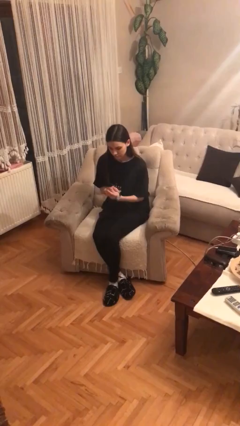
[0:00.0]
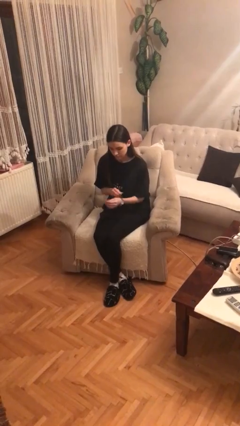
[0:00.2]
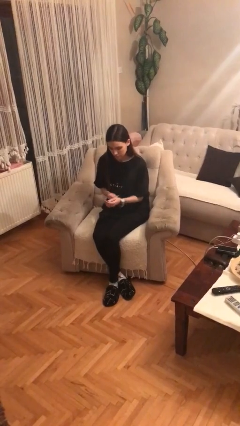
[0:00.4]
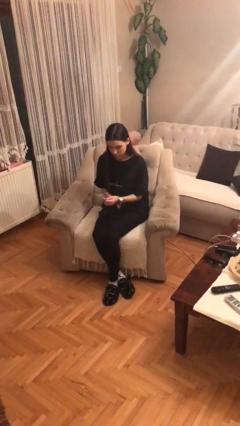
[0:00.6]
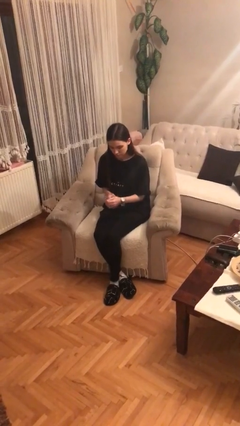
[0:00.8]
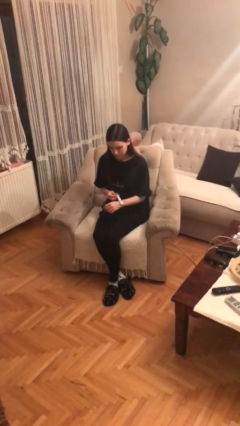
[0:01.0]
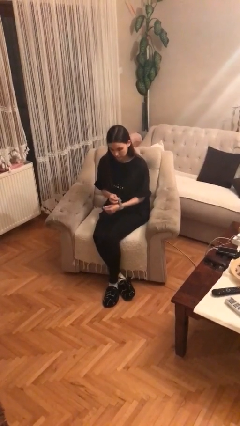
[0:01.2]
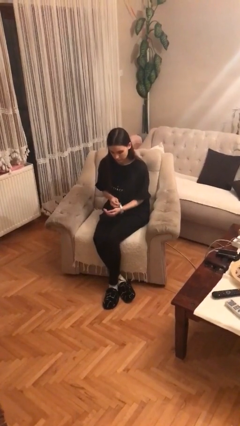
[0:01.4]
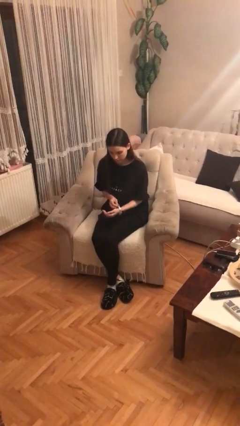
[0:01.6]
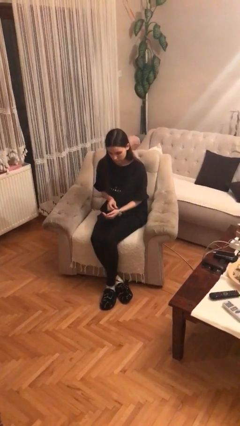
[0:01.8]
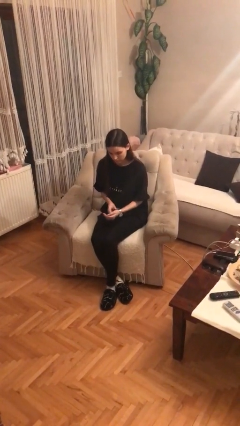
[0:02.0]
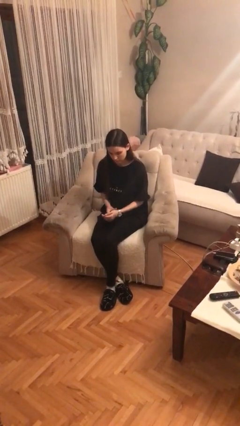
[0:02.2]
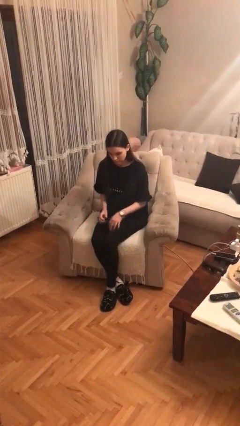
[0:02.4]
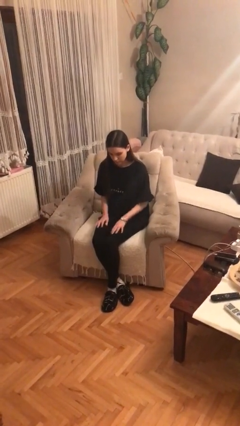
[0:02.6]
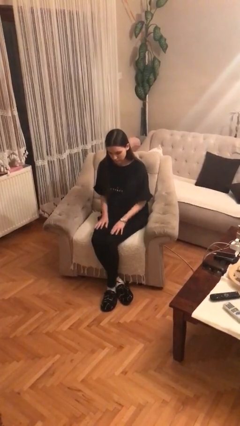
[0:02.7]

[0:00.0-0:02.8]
person puts on wristwatch

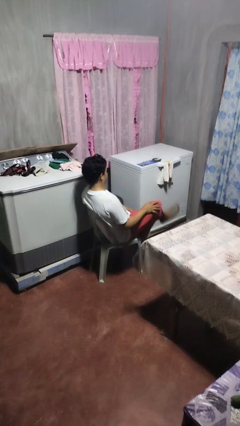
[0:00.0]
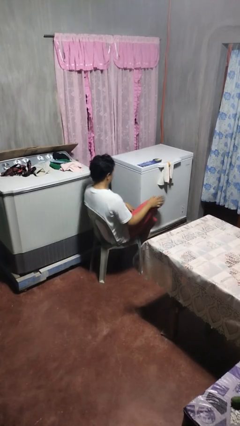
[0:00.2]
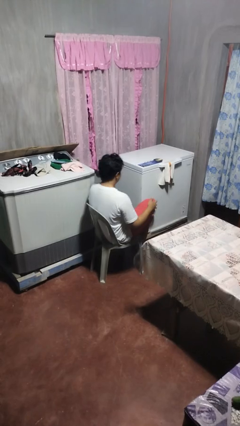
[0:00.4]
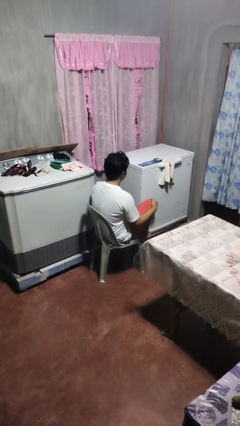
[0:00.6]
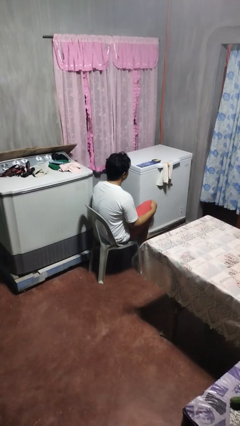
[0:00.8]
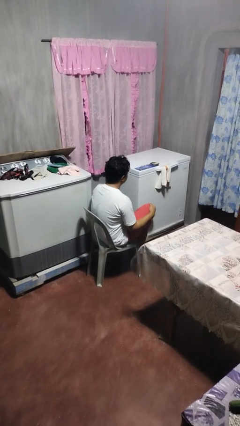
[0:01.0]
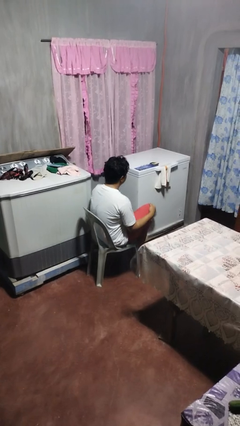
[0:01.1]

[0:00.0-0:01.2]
person crosses legs

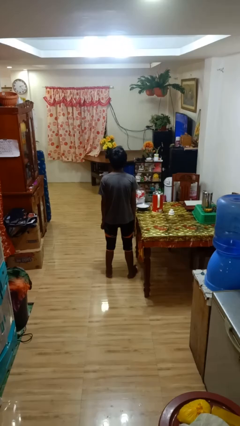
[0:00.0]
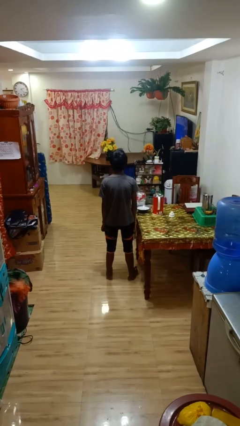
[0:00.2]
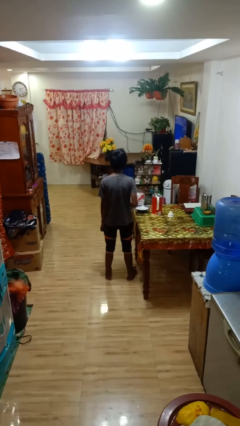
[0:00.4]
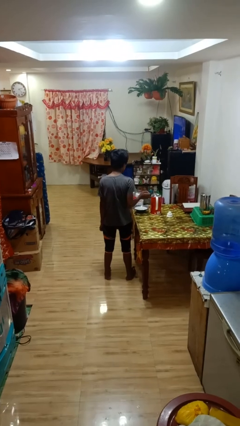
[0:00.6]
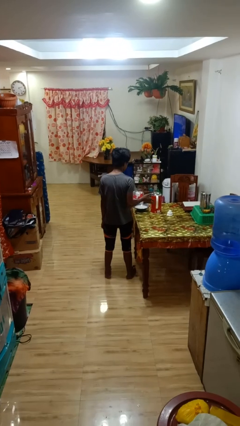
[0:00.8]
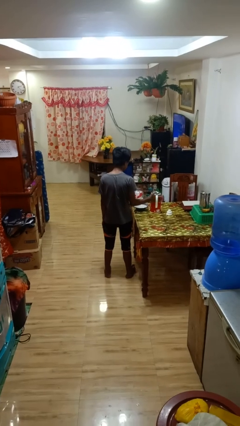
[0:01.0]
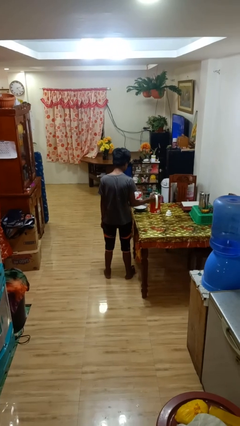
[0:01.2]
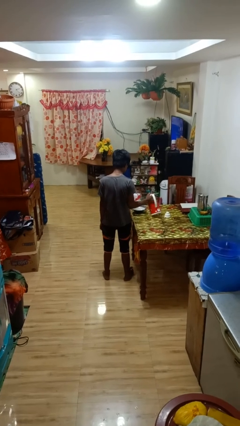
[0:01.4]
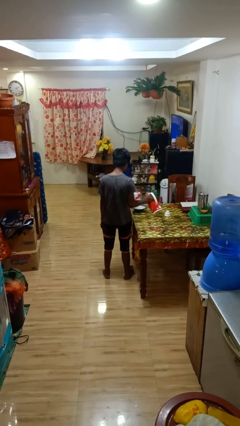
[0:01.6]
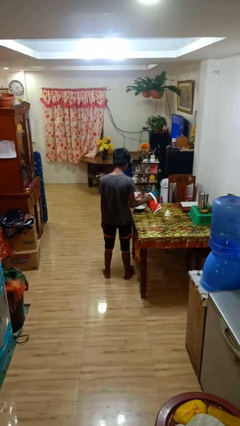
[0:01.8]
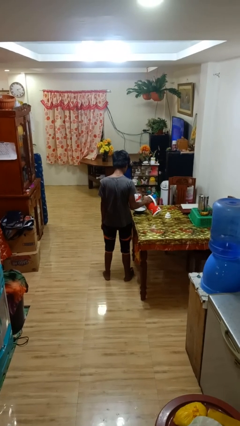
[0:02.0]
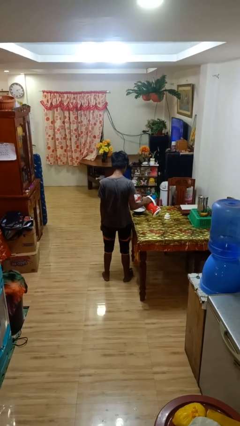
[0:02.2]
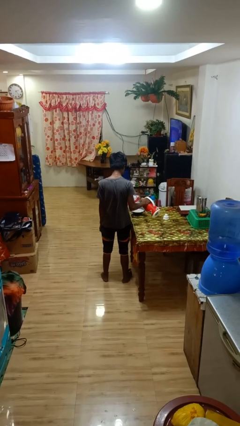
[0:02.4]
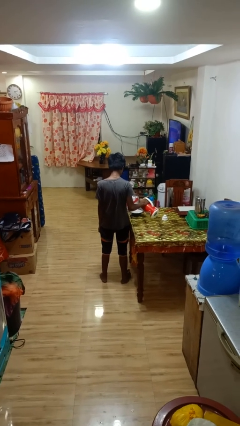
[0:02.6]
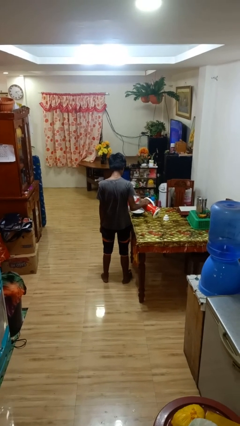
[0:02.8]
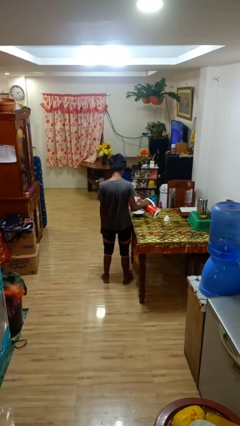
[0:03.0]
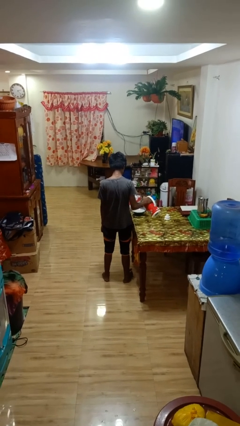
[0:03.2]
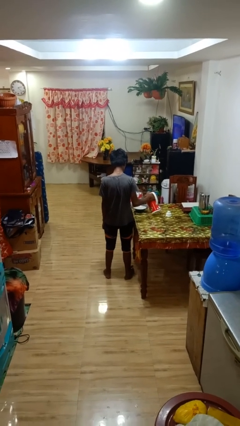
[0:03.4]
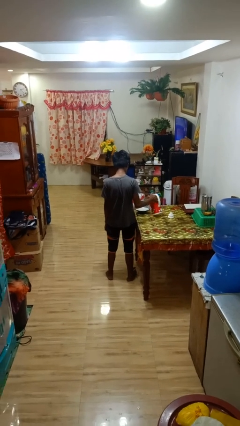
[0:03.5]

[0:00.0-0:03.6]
person pours into bowl

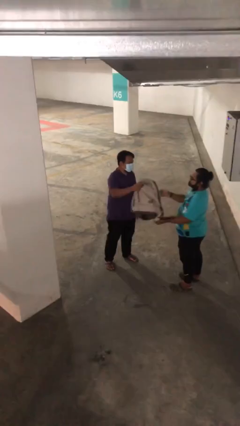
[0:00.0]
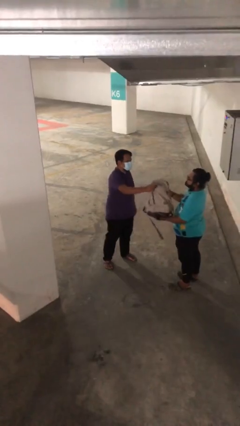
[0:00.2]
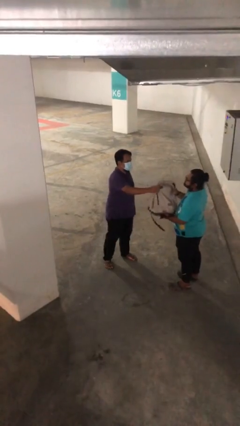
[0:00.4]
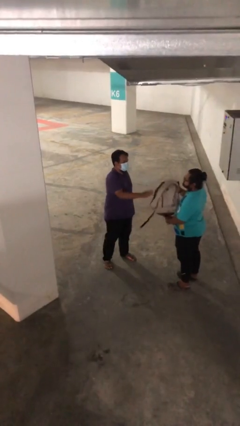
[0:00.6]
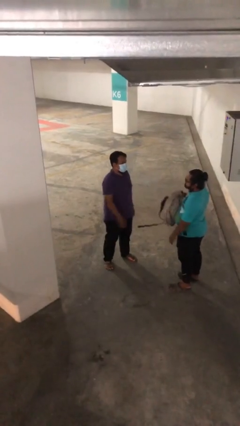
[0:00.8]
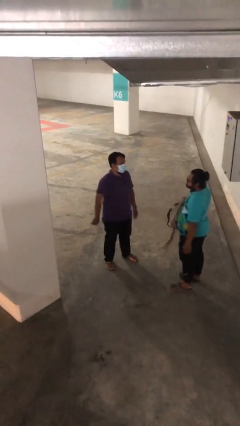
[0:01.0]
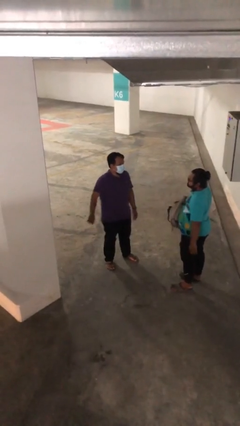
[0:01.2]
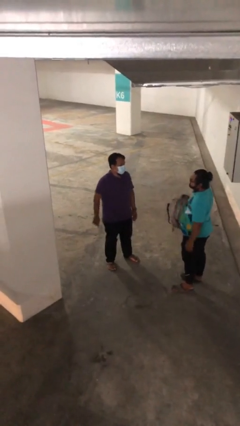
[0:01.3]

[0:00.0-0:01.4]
person transfers object to person

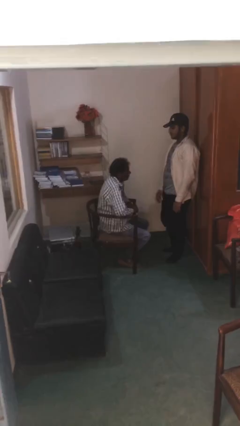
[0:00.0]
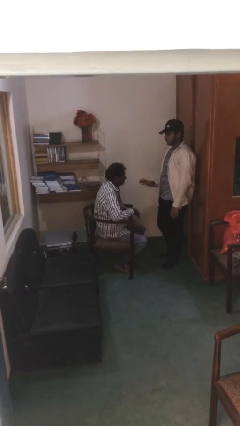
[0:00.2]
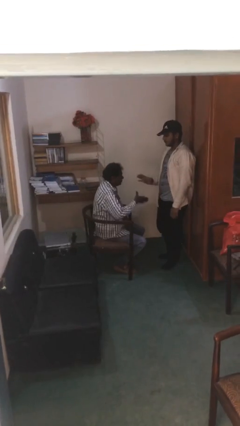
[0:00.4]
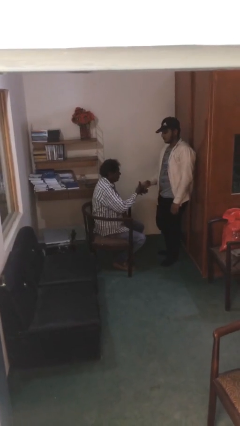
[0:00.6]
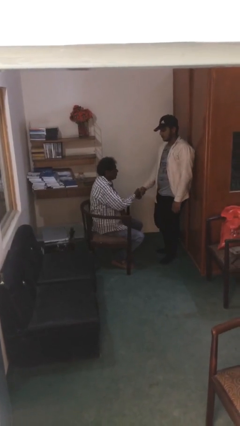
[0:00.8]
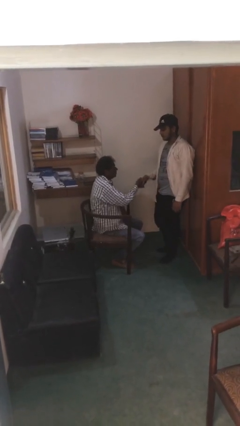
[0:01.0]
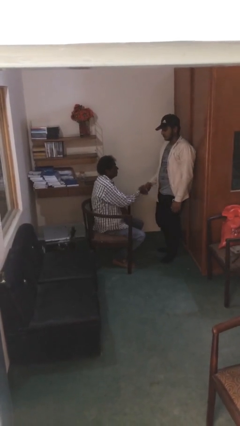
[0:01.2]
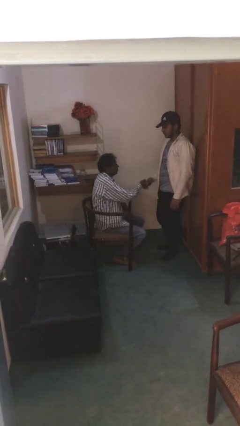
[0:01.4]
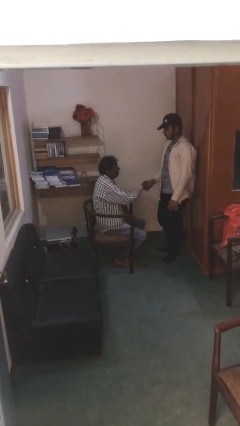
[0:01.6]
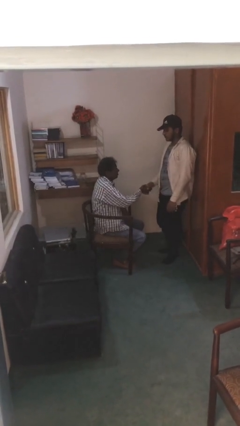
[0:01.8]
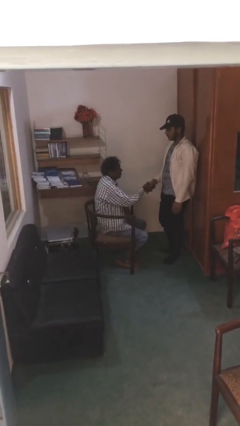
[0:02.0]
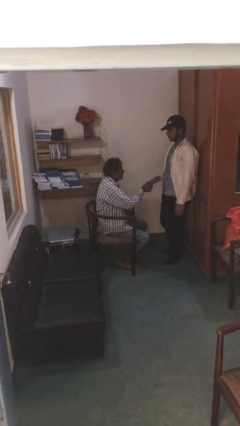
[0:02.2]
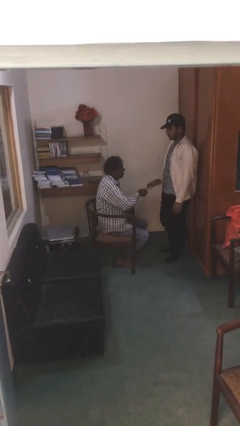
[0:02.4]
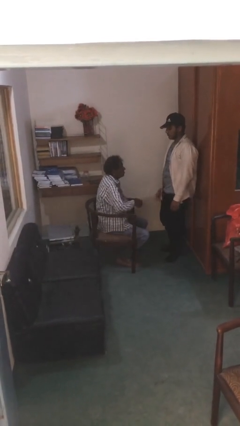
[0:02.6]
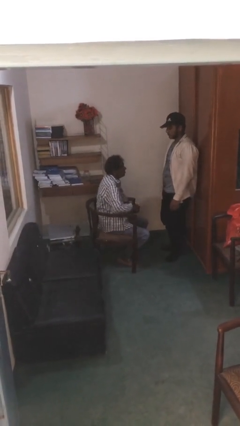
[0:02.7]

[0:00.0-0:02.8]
person shakes hand

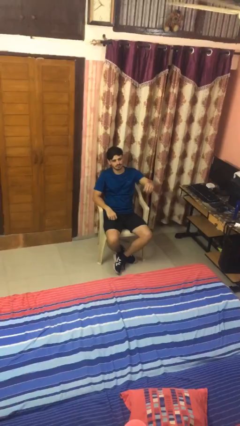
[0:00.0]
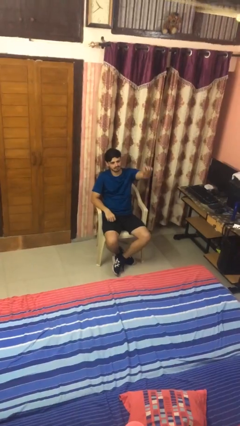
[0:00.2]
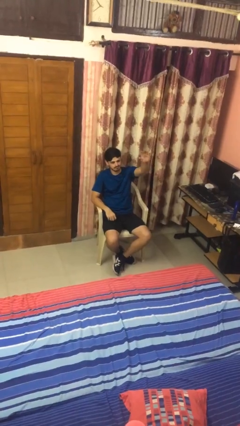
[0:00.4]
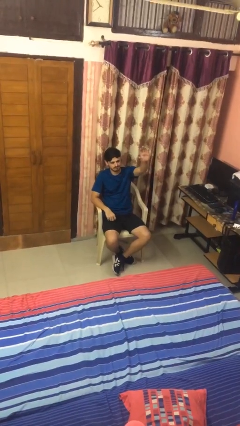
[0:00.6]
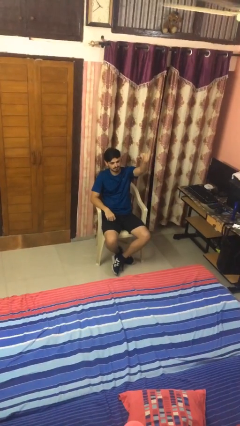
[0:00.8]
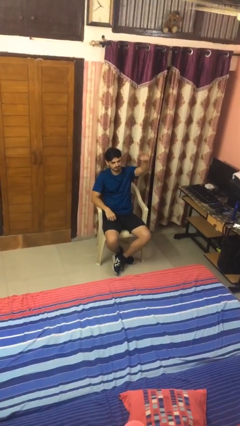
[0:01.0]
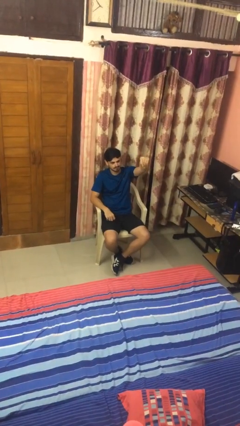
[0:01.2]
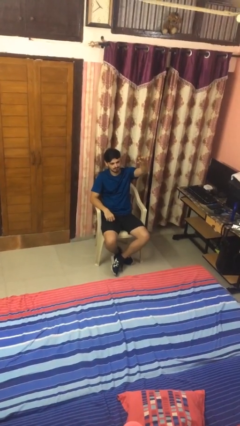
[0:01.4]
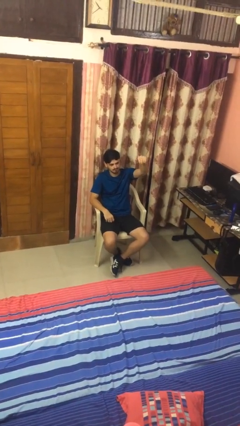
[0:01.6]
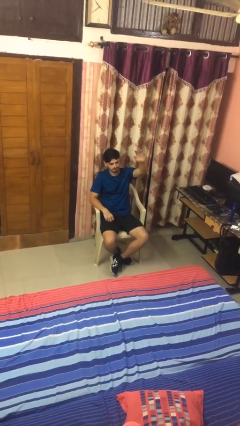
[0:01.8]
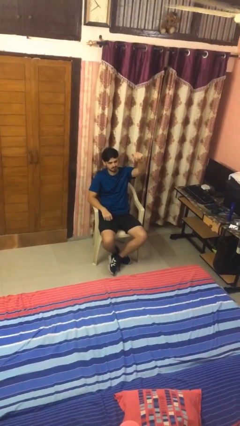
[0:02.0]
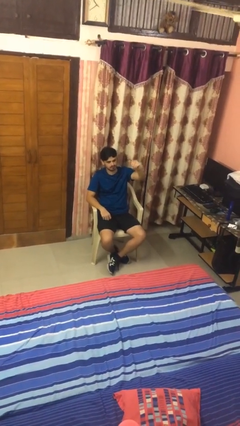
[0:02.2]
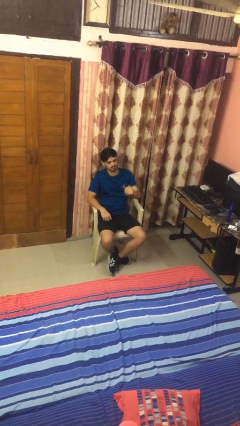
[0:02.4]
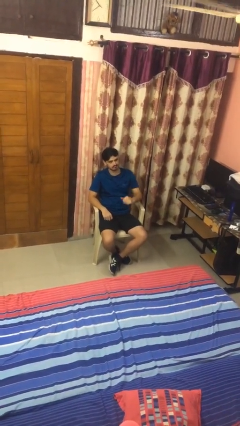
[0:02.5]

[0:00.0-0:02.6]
person gestures come here

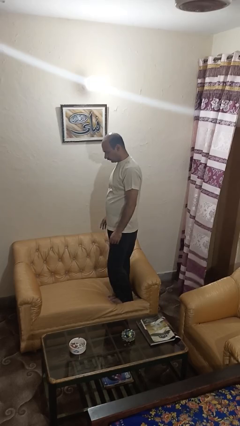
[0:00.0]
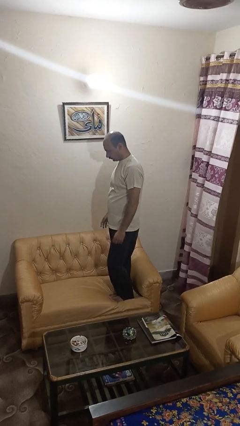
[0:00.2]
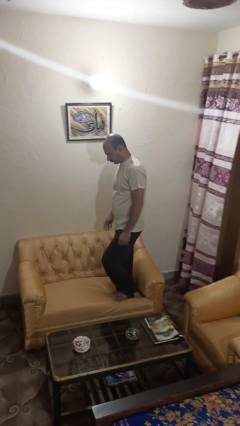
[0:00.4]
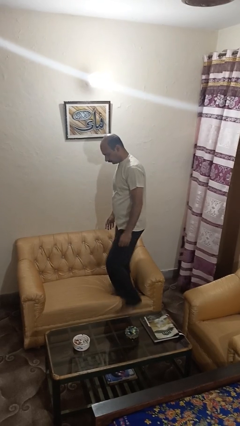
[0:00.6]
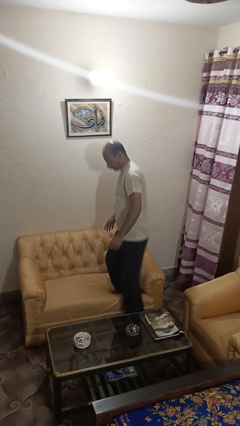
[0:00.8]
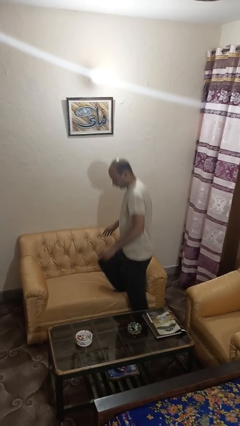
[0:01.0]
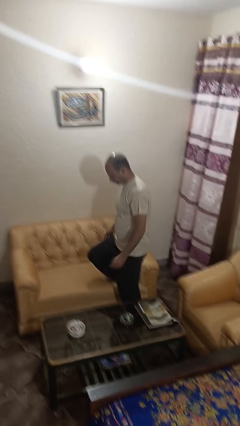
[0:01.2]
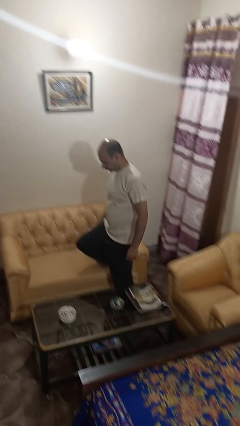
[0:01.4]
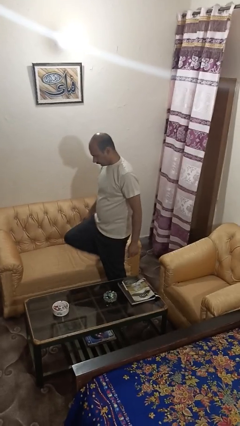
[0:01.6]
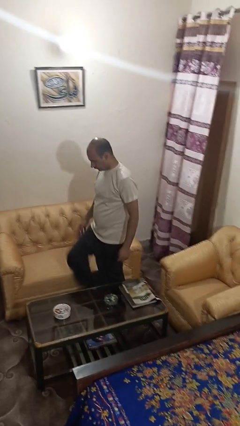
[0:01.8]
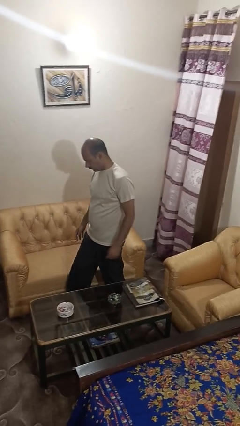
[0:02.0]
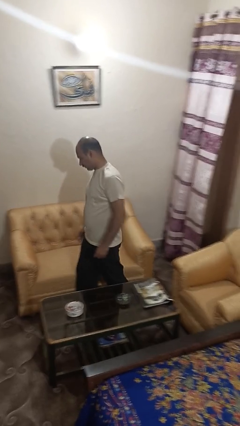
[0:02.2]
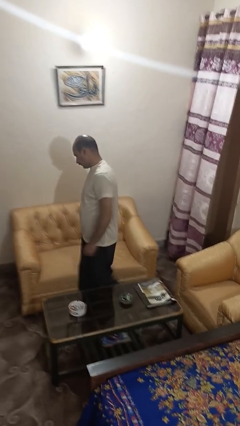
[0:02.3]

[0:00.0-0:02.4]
person climbs off couch
